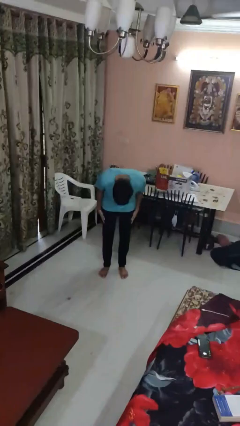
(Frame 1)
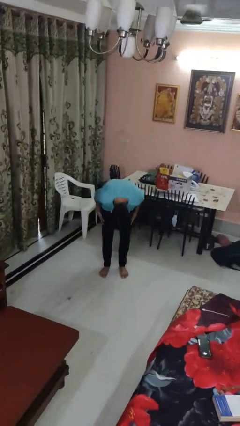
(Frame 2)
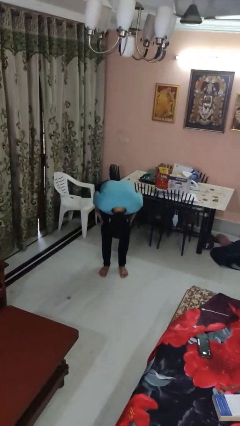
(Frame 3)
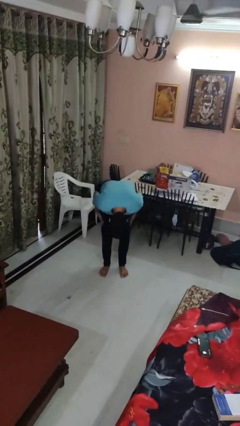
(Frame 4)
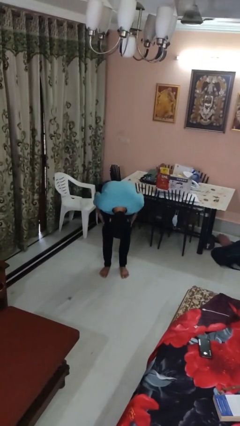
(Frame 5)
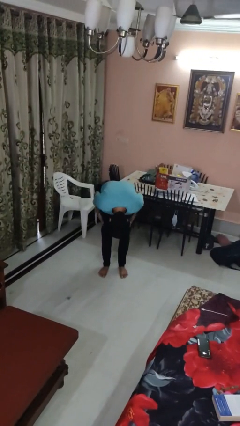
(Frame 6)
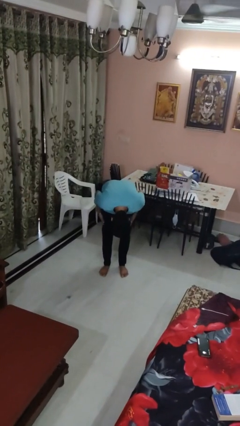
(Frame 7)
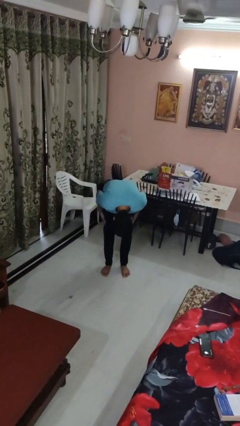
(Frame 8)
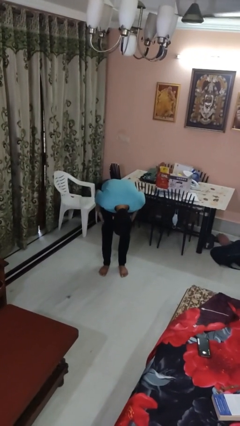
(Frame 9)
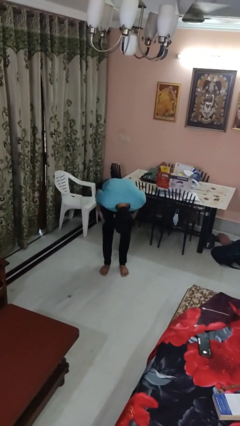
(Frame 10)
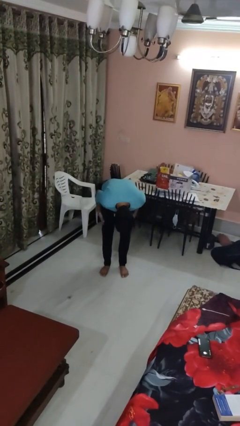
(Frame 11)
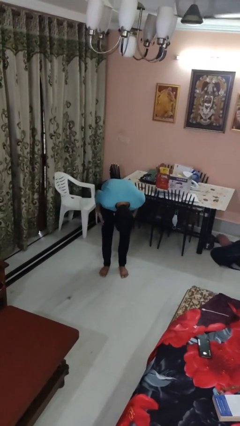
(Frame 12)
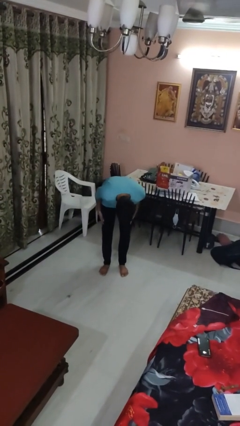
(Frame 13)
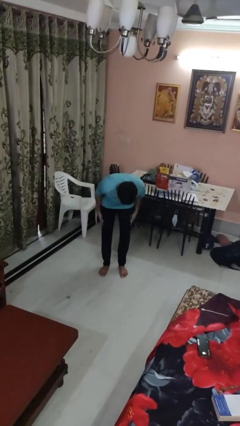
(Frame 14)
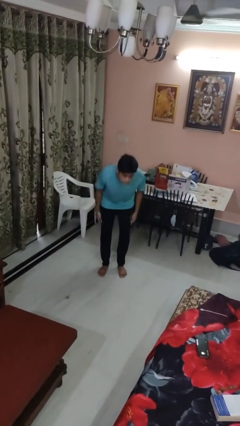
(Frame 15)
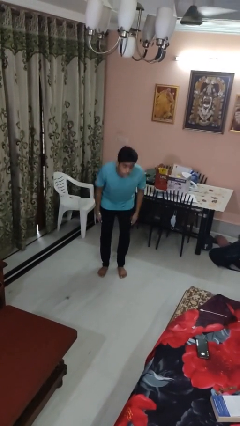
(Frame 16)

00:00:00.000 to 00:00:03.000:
person bows

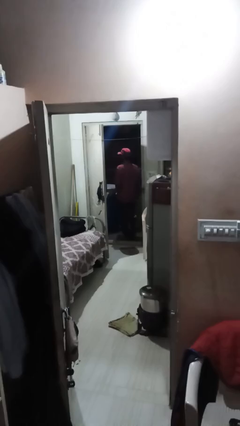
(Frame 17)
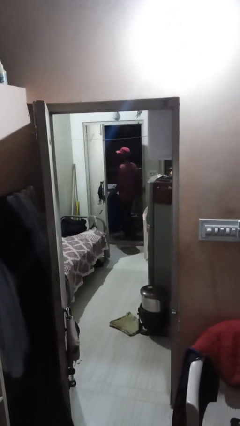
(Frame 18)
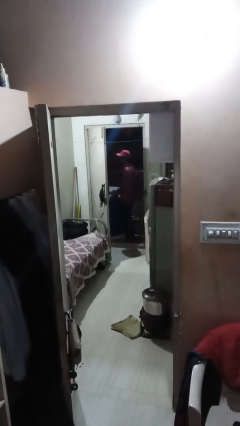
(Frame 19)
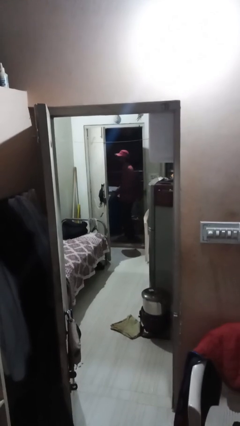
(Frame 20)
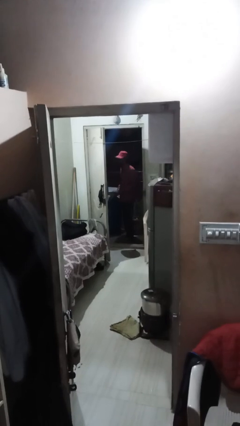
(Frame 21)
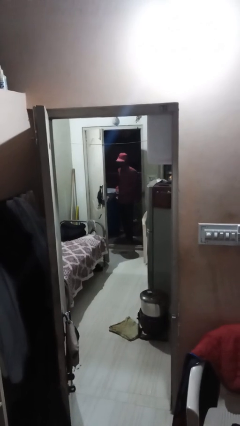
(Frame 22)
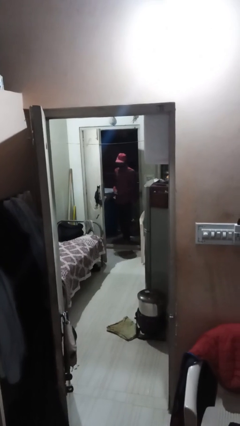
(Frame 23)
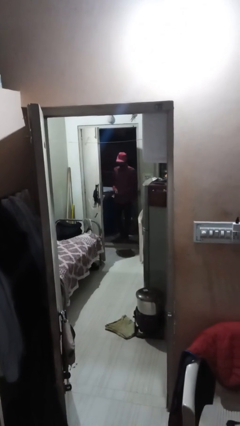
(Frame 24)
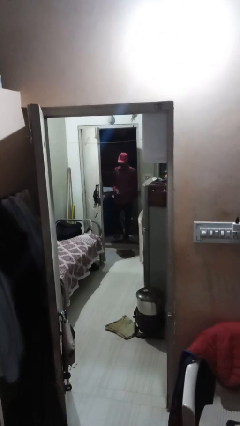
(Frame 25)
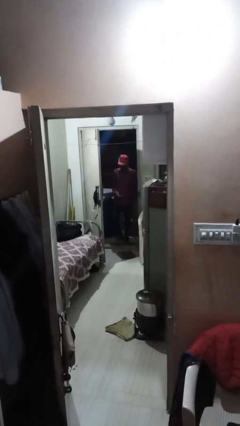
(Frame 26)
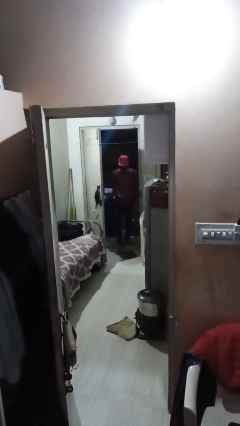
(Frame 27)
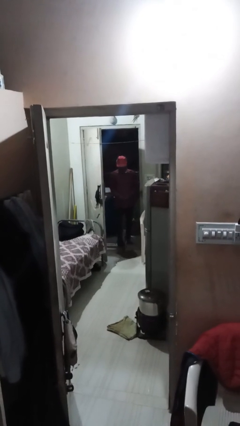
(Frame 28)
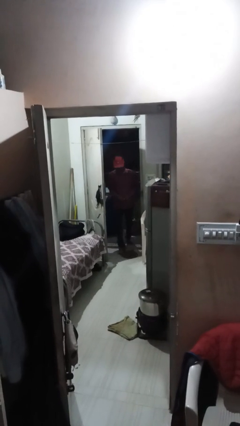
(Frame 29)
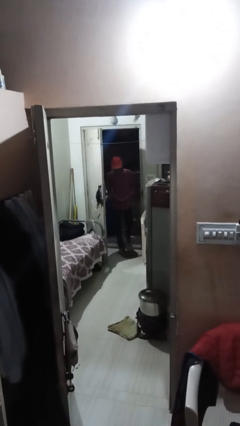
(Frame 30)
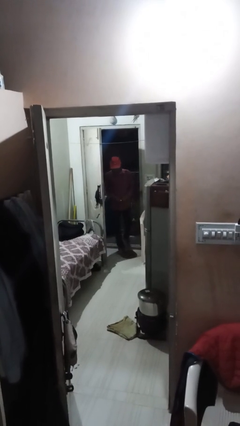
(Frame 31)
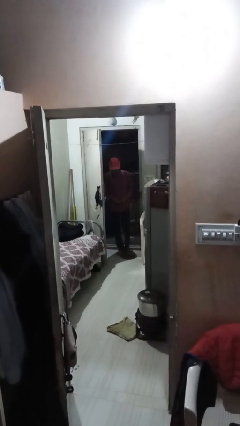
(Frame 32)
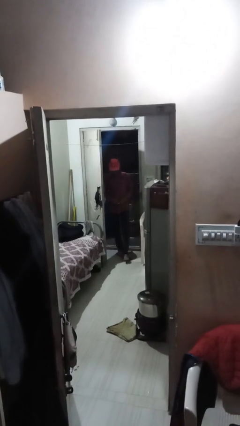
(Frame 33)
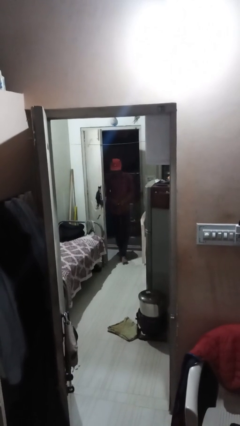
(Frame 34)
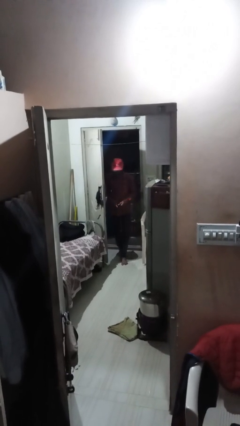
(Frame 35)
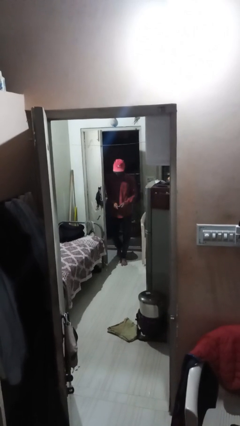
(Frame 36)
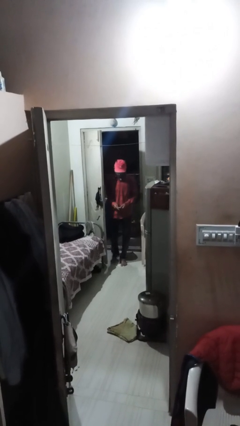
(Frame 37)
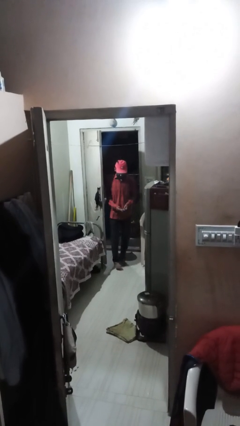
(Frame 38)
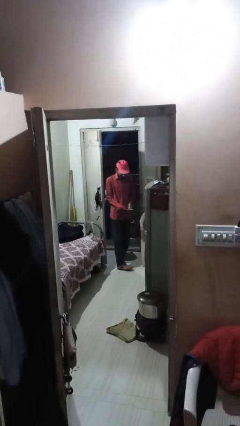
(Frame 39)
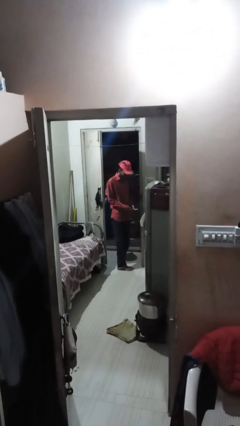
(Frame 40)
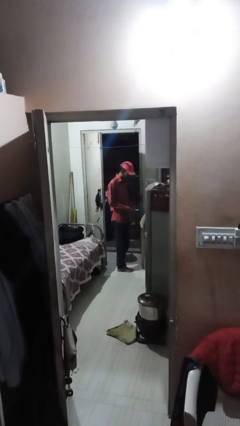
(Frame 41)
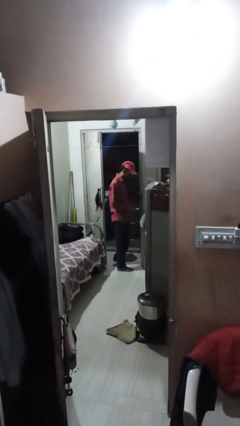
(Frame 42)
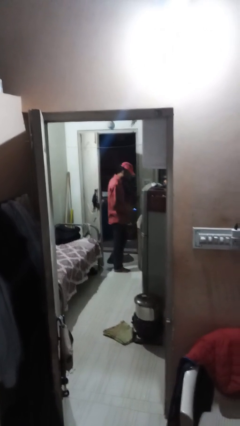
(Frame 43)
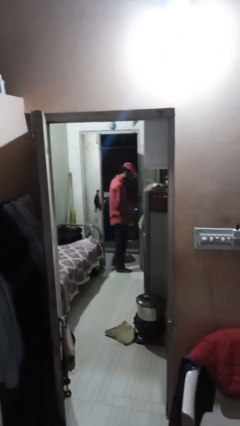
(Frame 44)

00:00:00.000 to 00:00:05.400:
person enters scene through structure

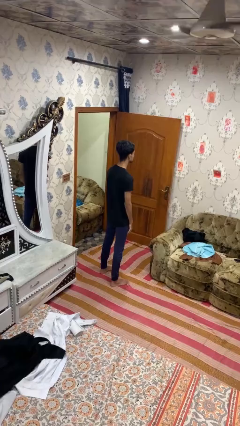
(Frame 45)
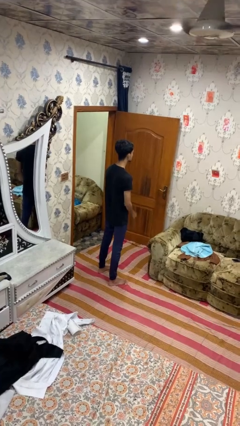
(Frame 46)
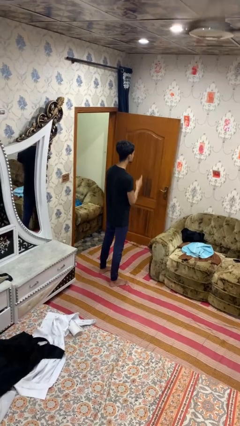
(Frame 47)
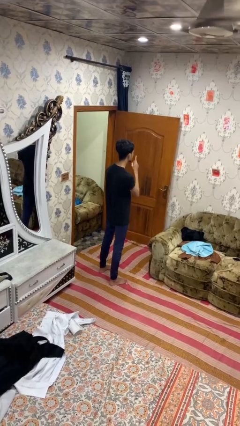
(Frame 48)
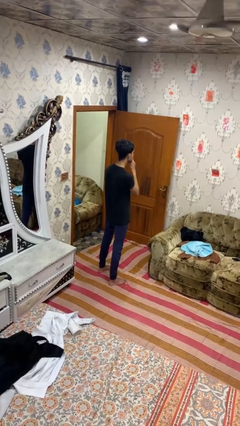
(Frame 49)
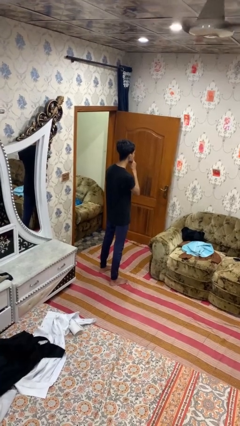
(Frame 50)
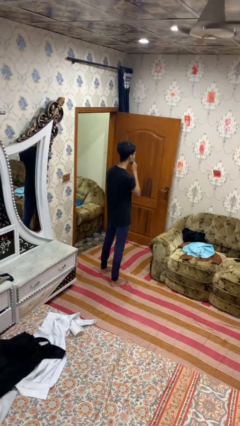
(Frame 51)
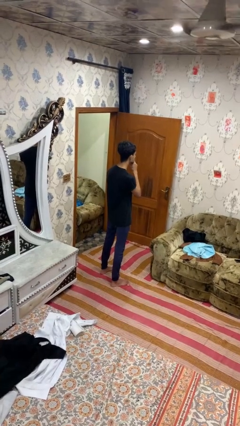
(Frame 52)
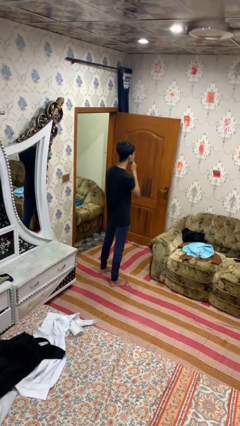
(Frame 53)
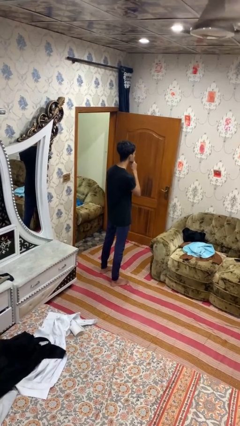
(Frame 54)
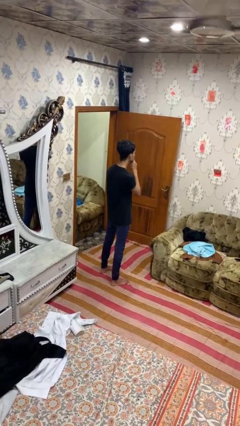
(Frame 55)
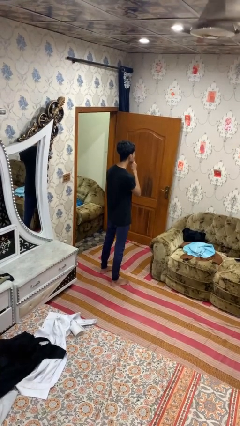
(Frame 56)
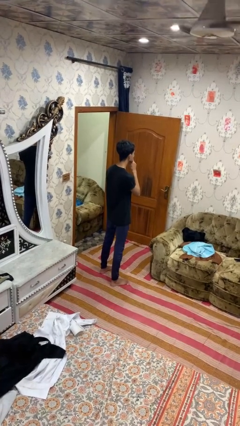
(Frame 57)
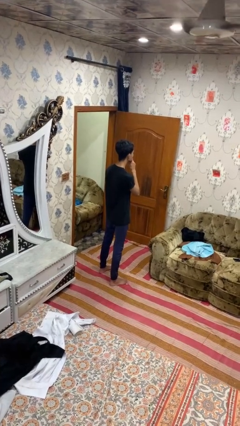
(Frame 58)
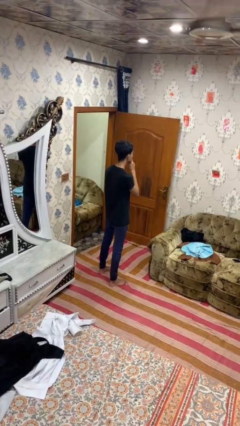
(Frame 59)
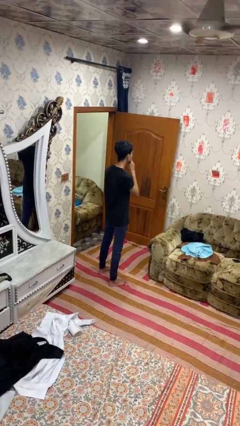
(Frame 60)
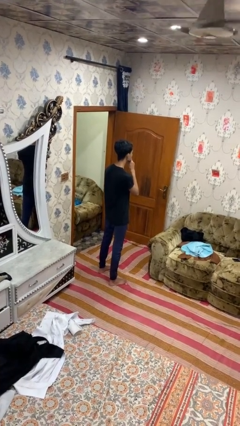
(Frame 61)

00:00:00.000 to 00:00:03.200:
person gestures be quiet

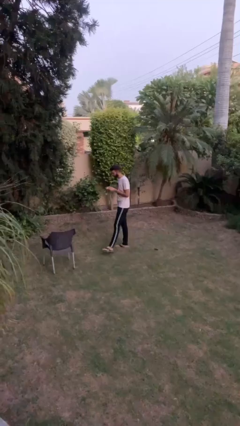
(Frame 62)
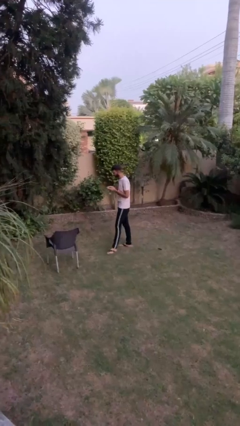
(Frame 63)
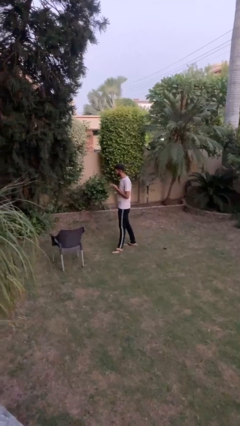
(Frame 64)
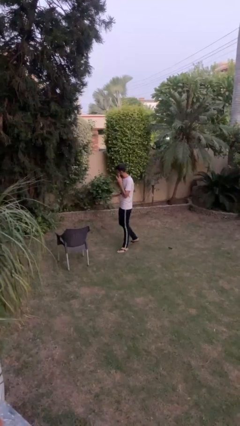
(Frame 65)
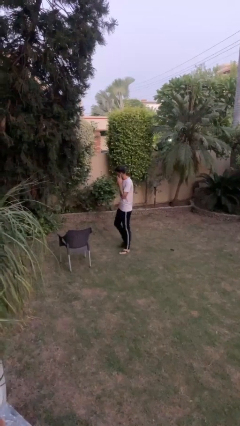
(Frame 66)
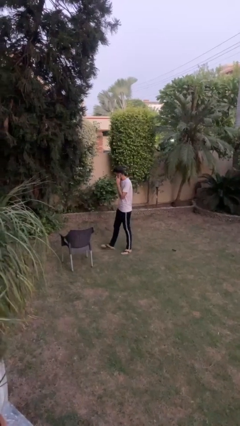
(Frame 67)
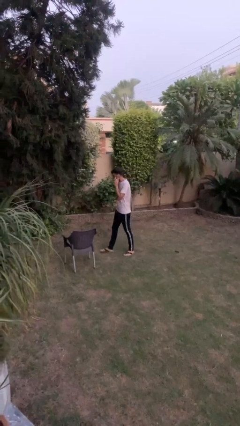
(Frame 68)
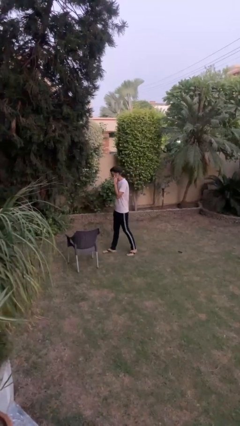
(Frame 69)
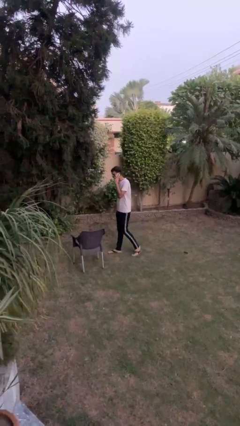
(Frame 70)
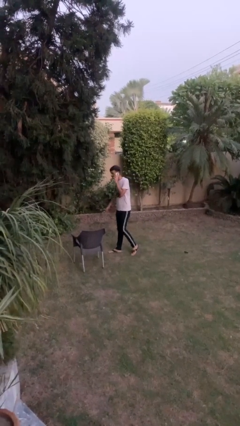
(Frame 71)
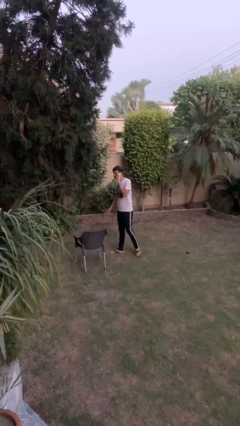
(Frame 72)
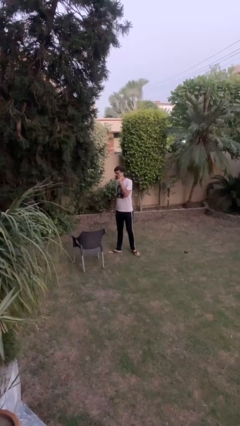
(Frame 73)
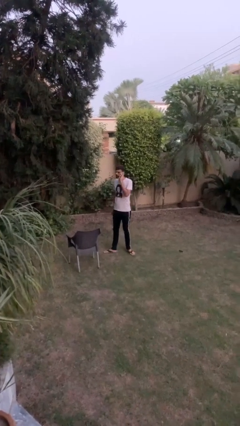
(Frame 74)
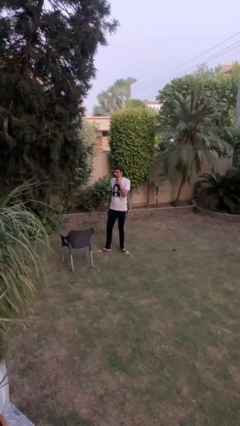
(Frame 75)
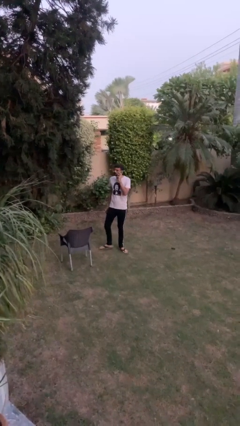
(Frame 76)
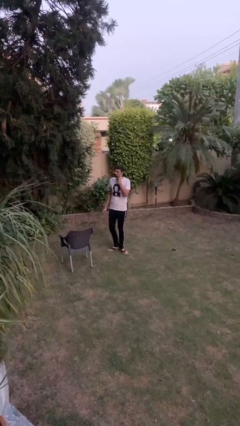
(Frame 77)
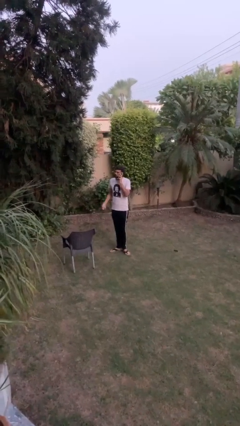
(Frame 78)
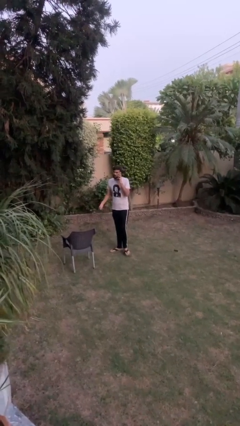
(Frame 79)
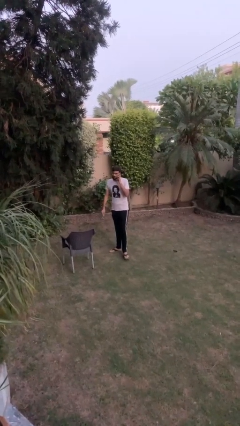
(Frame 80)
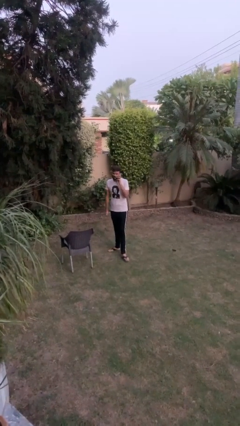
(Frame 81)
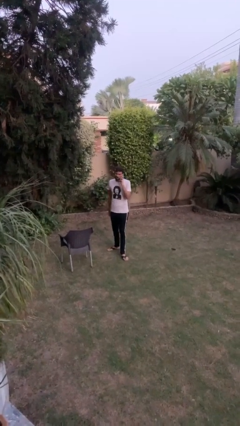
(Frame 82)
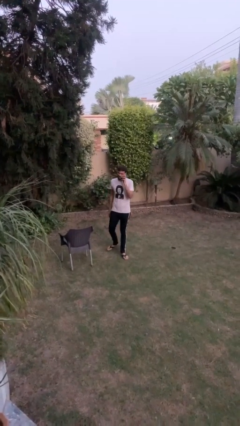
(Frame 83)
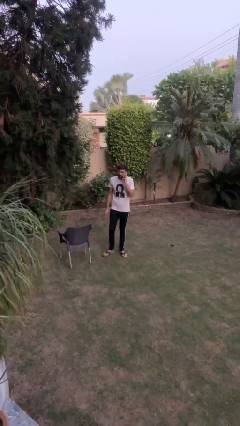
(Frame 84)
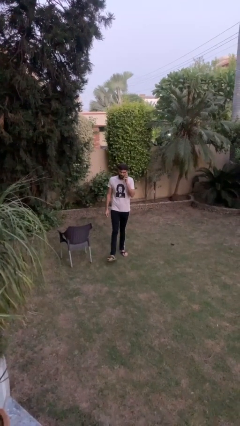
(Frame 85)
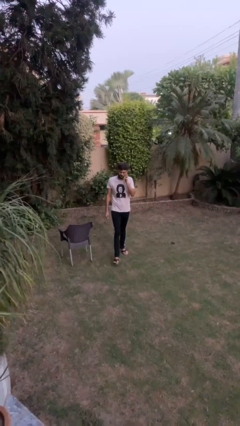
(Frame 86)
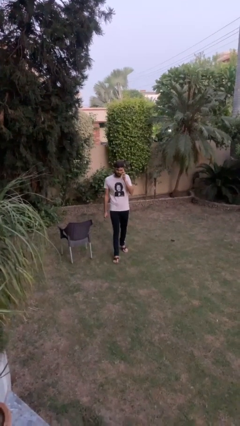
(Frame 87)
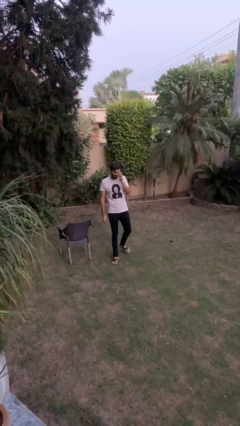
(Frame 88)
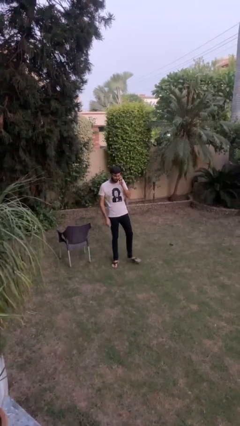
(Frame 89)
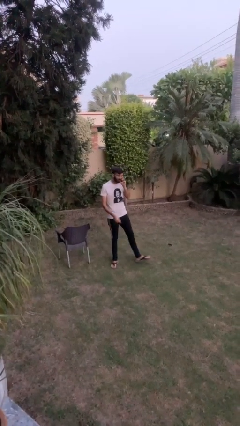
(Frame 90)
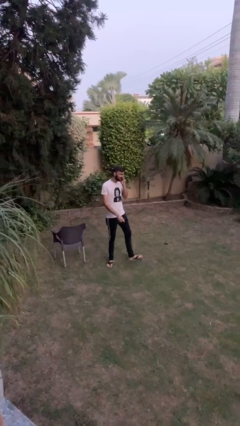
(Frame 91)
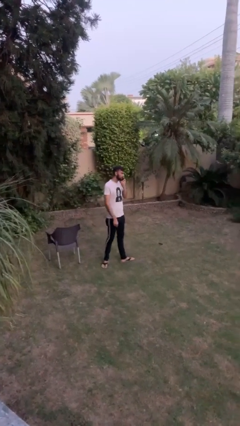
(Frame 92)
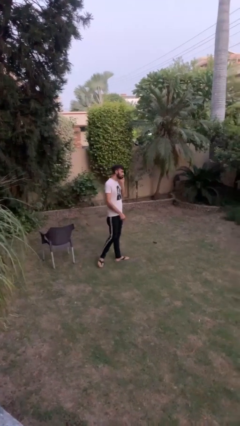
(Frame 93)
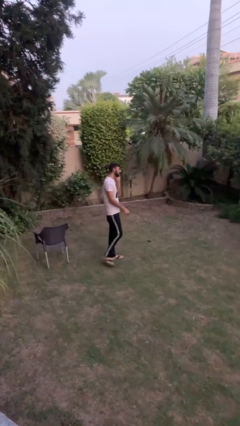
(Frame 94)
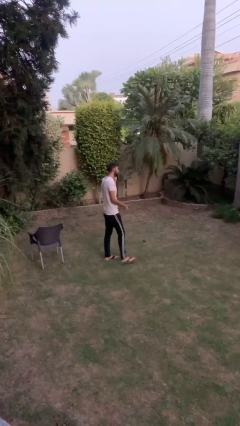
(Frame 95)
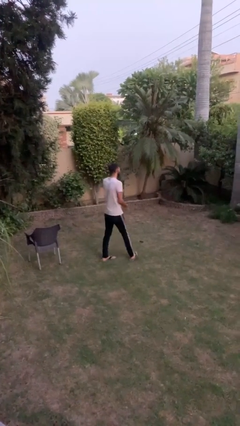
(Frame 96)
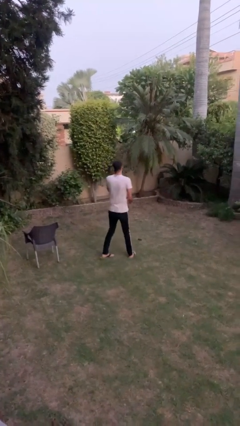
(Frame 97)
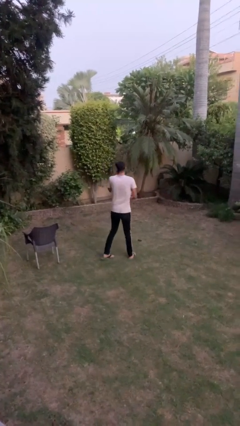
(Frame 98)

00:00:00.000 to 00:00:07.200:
person talks on phone
